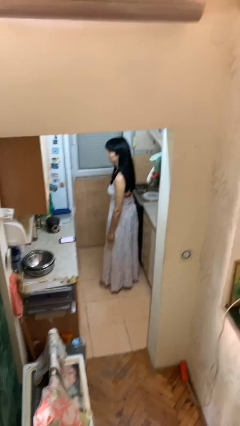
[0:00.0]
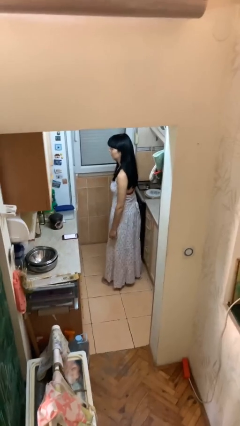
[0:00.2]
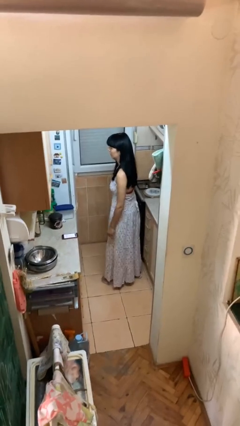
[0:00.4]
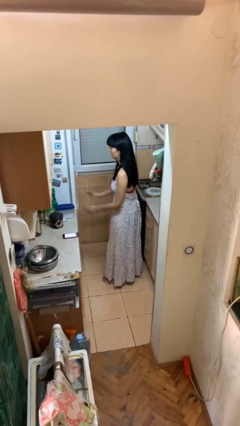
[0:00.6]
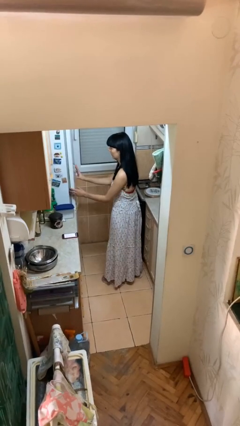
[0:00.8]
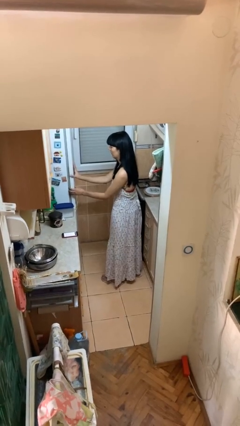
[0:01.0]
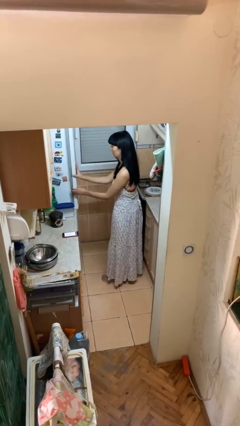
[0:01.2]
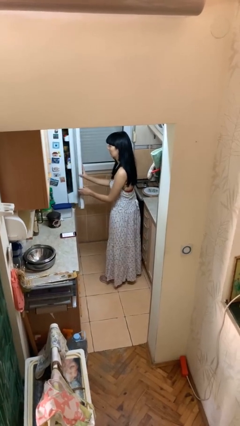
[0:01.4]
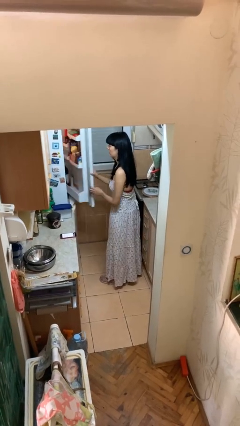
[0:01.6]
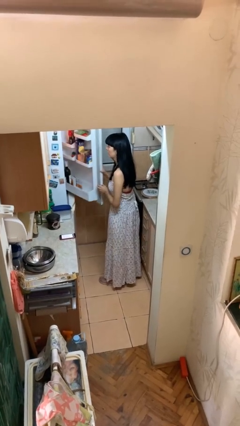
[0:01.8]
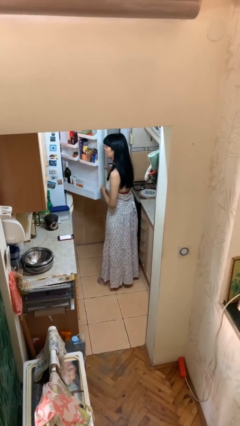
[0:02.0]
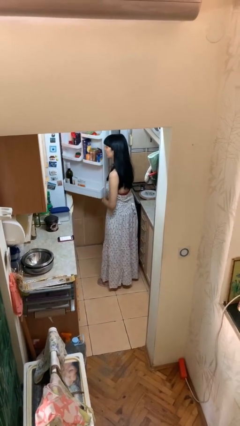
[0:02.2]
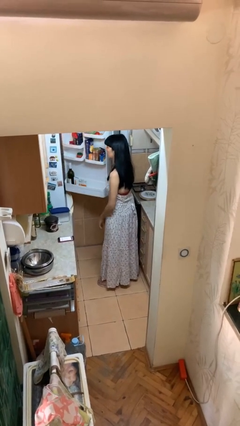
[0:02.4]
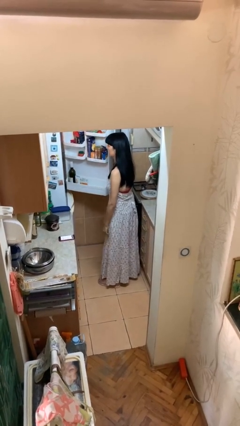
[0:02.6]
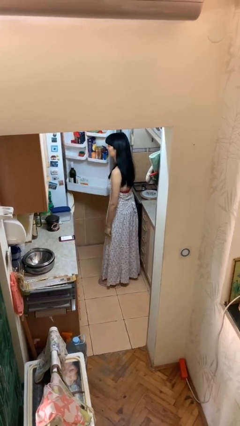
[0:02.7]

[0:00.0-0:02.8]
person opens refrigerator

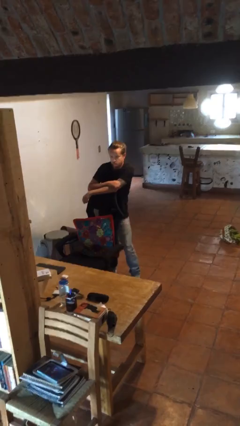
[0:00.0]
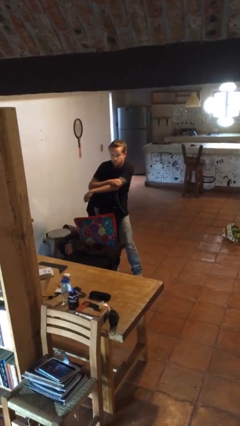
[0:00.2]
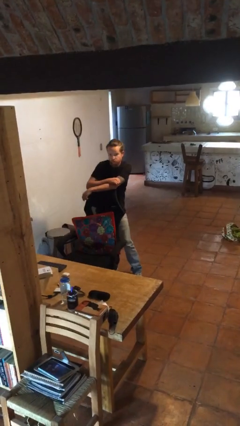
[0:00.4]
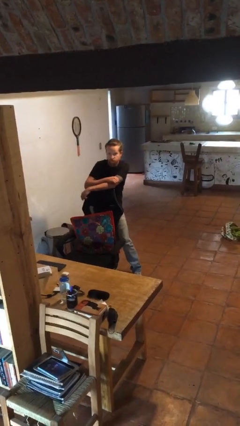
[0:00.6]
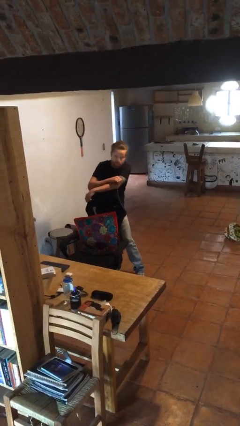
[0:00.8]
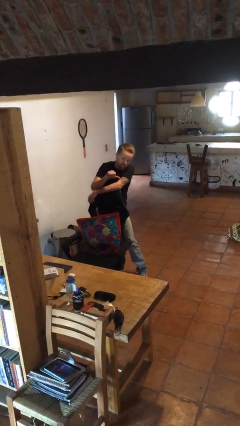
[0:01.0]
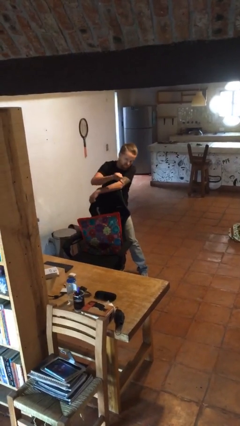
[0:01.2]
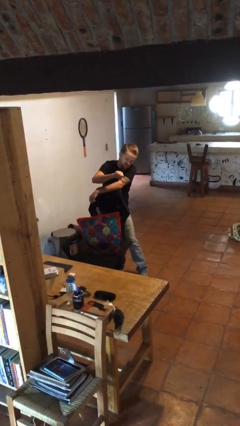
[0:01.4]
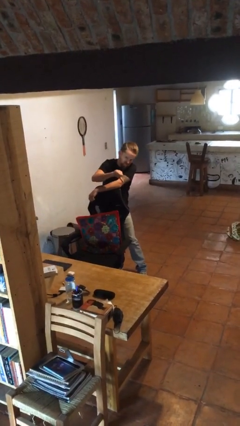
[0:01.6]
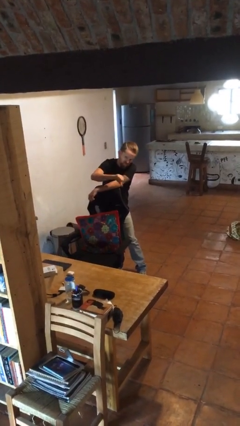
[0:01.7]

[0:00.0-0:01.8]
person gestures thumbs down

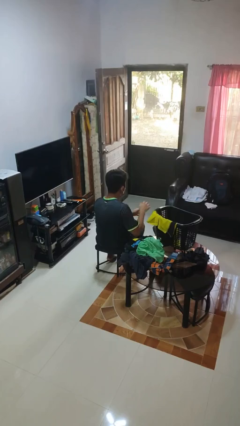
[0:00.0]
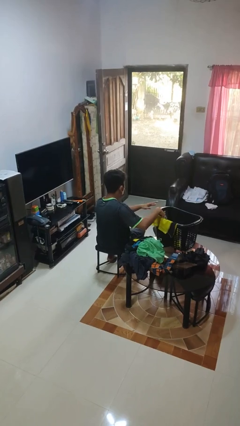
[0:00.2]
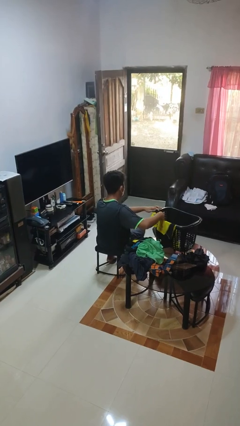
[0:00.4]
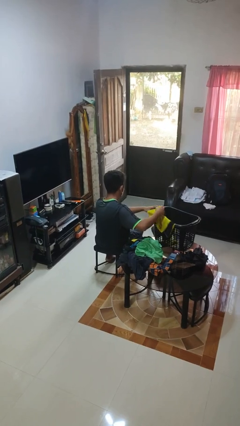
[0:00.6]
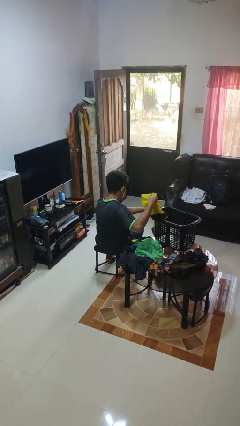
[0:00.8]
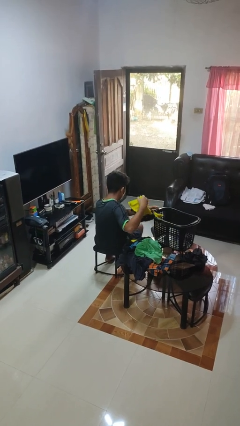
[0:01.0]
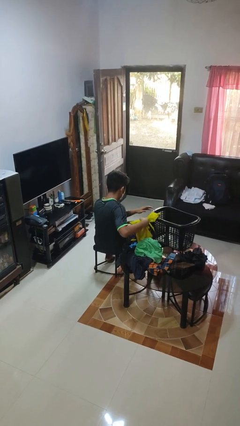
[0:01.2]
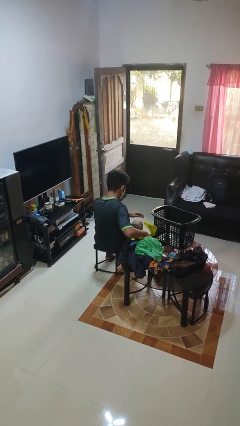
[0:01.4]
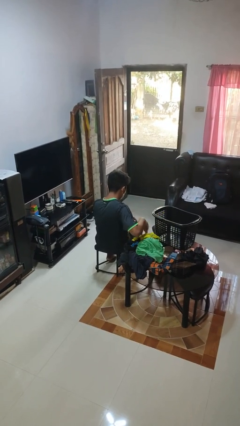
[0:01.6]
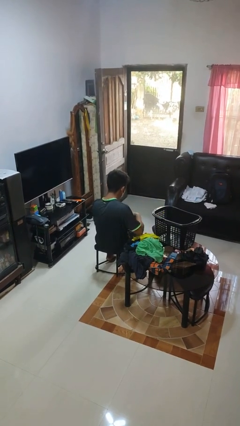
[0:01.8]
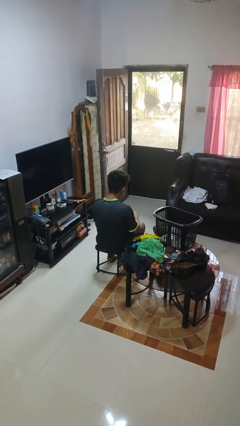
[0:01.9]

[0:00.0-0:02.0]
person takes object from basket

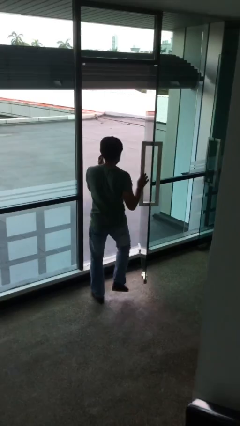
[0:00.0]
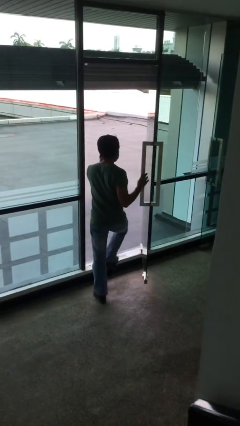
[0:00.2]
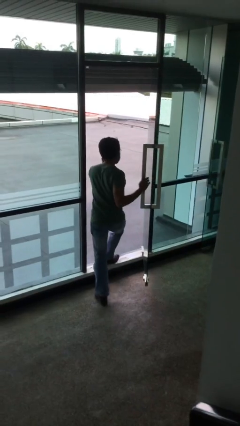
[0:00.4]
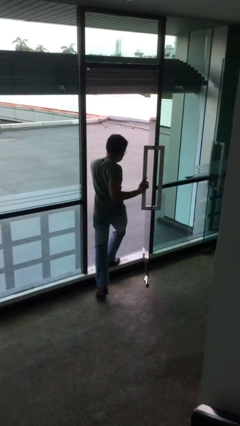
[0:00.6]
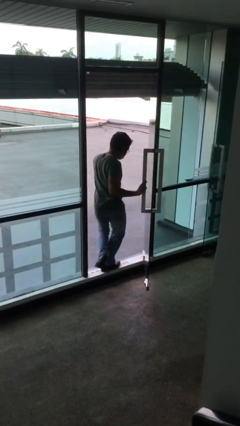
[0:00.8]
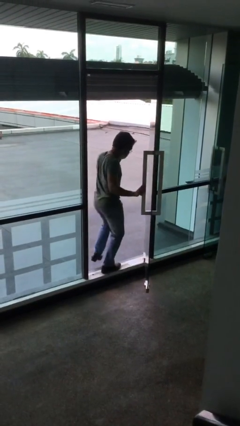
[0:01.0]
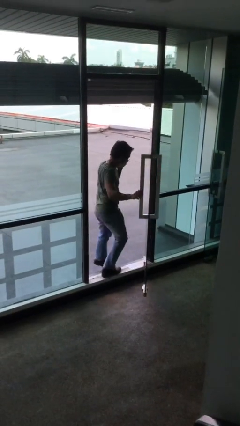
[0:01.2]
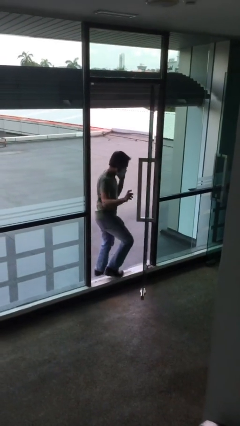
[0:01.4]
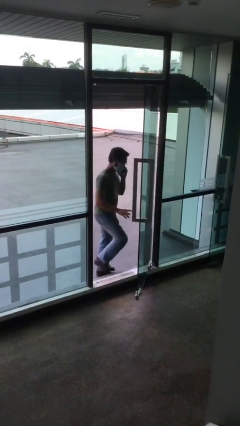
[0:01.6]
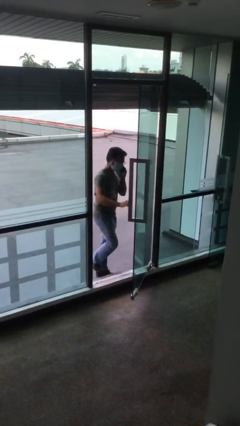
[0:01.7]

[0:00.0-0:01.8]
person exits scene through structure

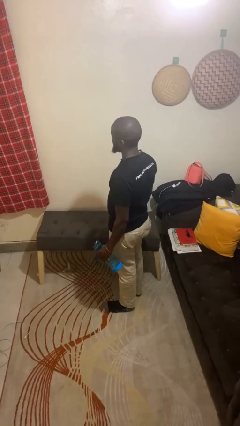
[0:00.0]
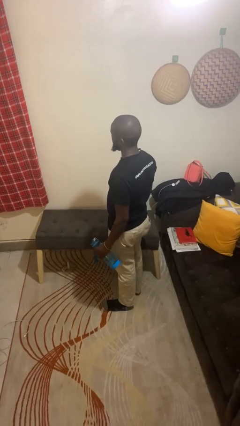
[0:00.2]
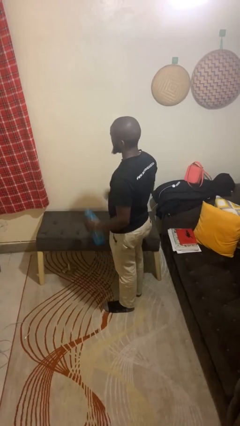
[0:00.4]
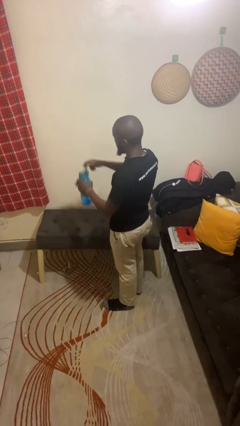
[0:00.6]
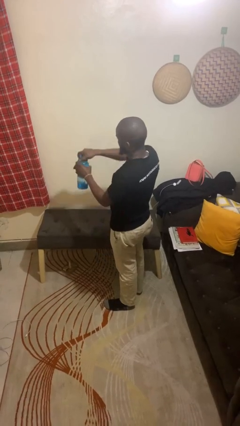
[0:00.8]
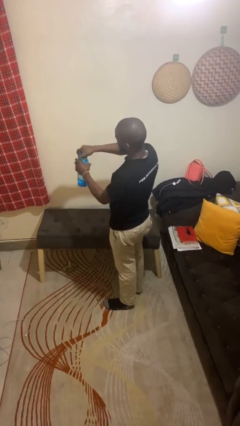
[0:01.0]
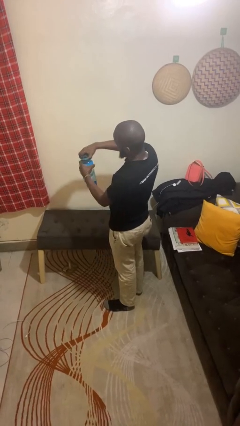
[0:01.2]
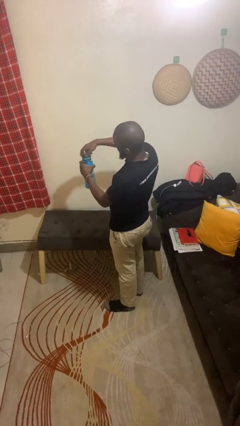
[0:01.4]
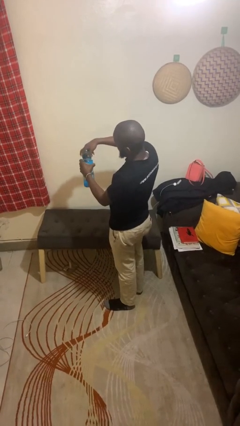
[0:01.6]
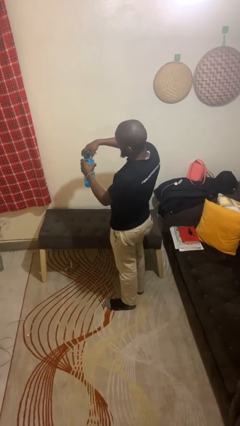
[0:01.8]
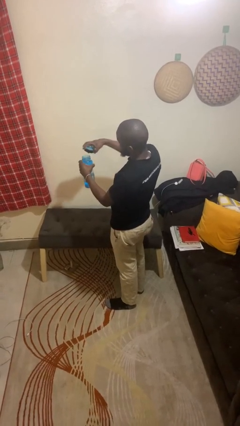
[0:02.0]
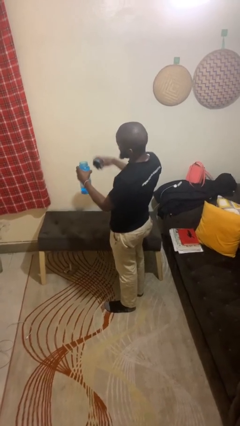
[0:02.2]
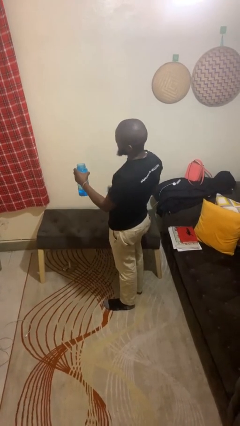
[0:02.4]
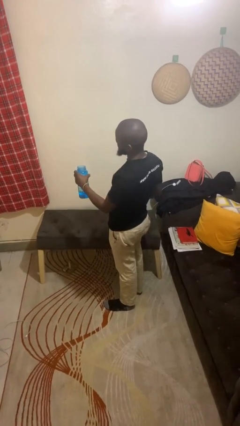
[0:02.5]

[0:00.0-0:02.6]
person opens jar

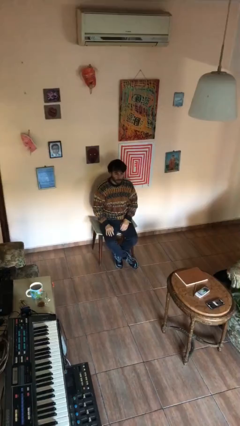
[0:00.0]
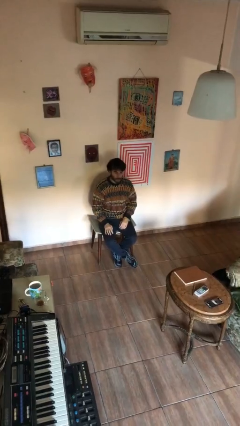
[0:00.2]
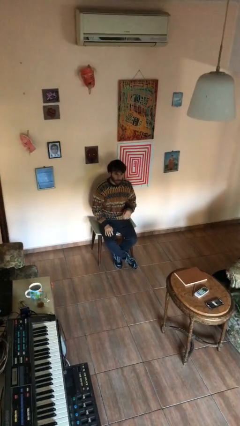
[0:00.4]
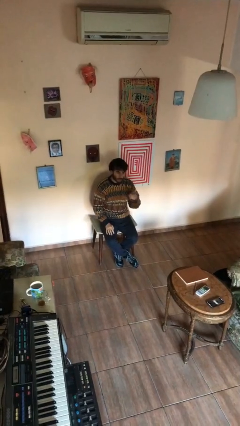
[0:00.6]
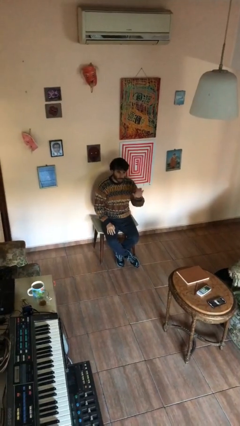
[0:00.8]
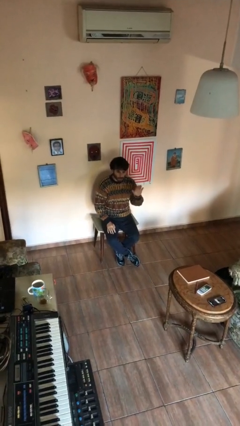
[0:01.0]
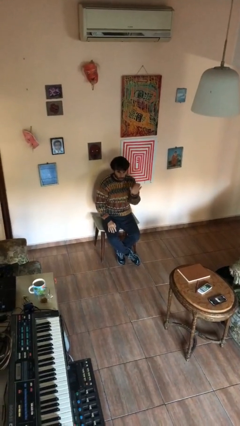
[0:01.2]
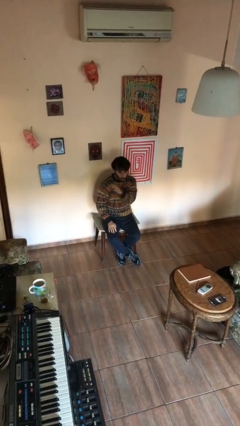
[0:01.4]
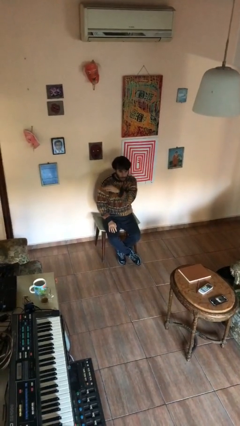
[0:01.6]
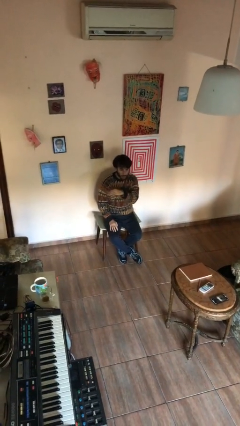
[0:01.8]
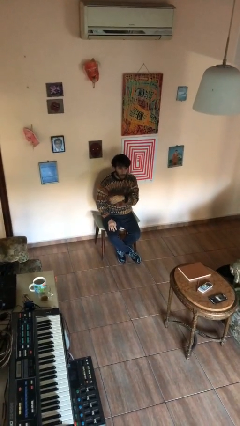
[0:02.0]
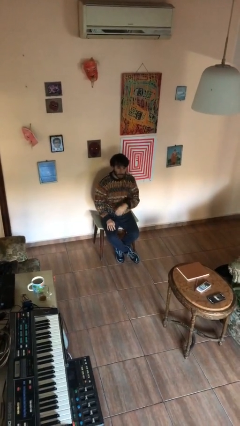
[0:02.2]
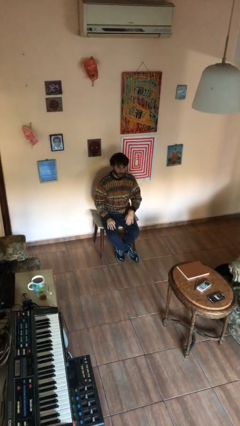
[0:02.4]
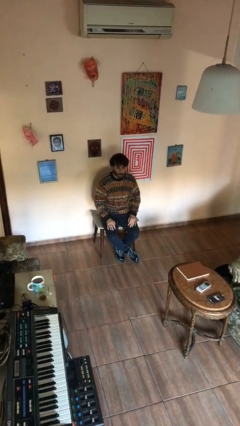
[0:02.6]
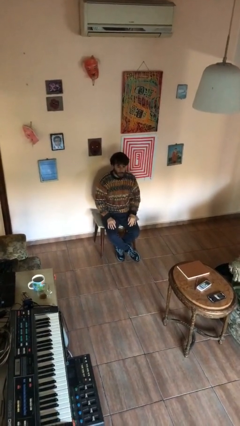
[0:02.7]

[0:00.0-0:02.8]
person gestures swipe right

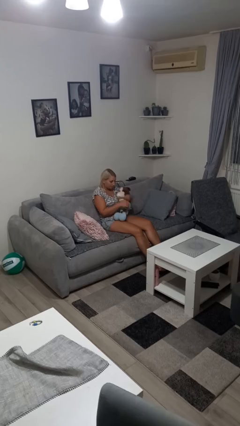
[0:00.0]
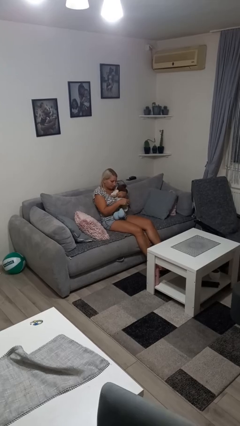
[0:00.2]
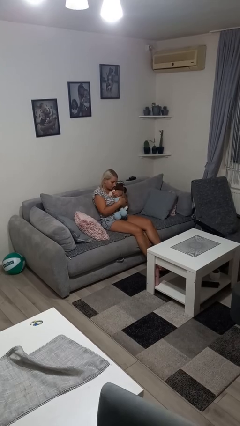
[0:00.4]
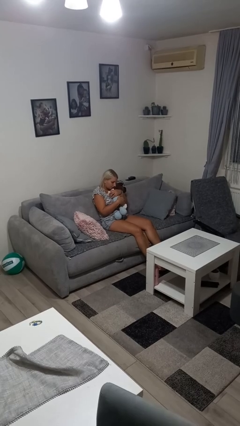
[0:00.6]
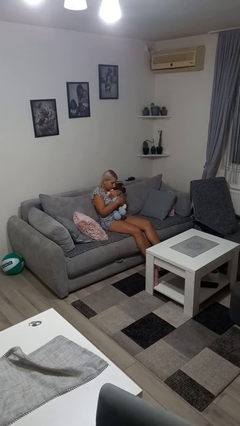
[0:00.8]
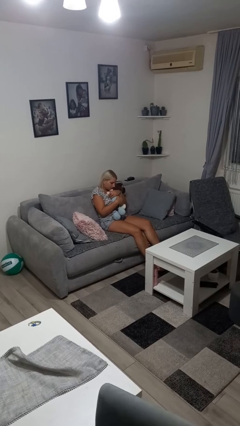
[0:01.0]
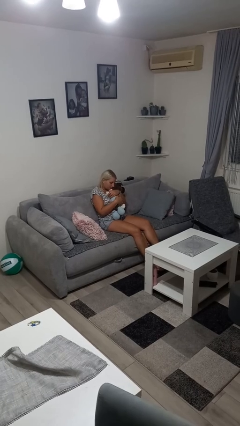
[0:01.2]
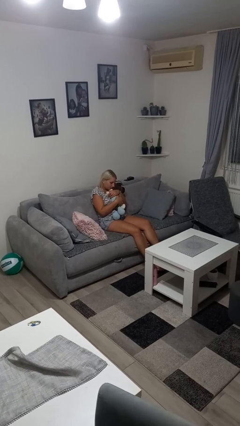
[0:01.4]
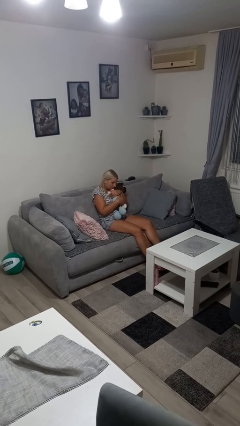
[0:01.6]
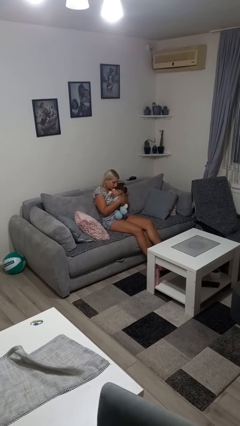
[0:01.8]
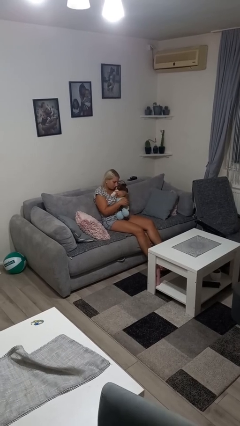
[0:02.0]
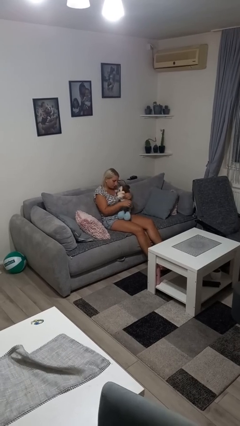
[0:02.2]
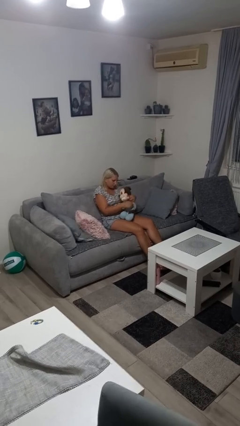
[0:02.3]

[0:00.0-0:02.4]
person hugs stuffed animal

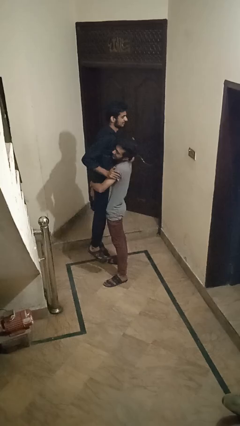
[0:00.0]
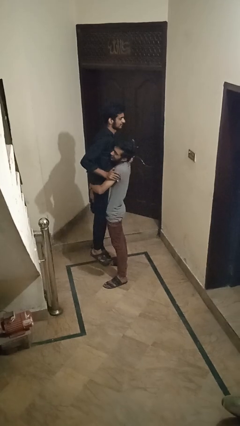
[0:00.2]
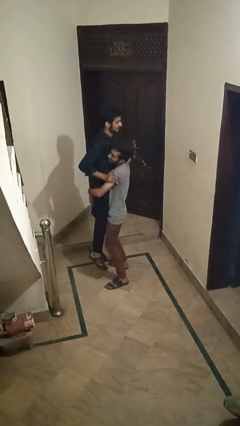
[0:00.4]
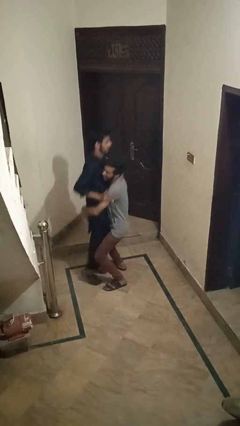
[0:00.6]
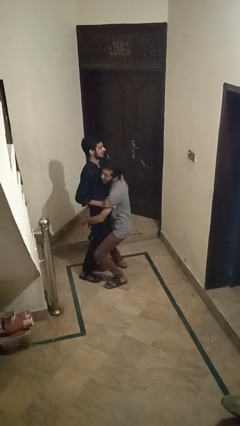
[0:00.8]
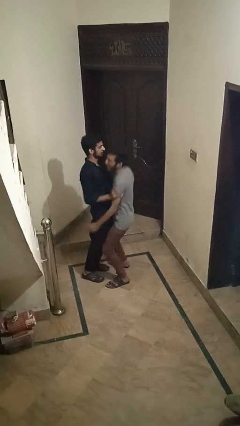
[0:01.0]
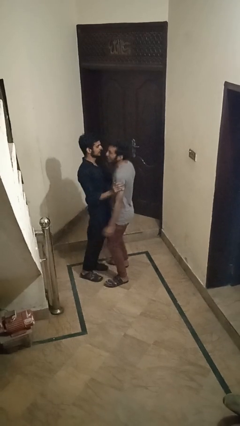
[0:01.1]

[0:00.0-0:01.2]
person puts down person
